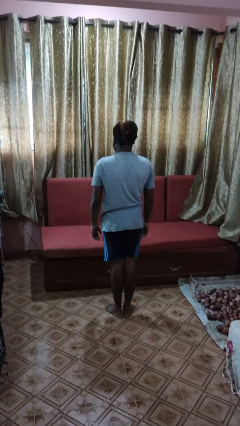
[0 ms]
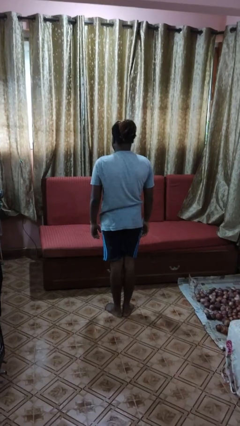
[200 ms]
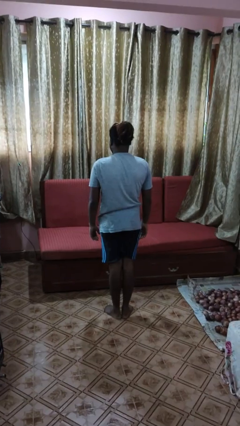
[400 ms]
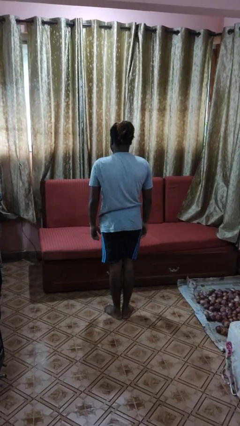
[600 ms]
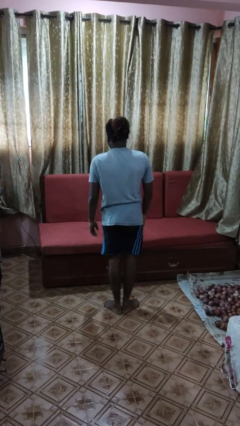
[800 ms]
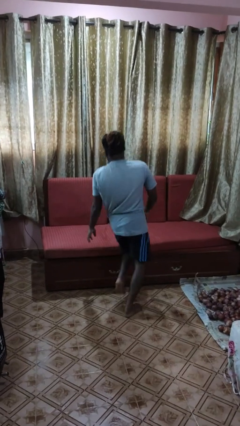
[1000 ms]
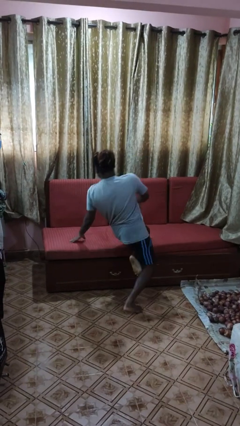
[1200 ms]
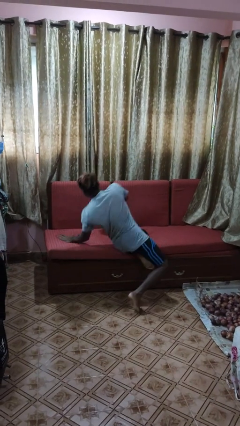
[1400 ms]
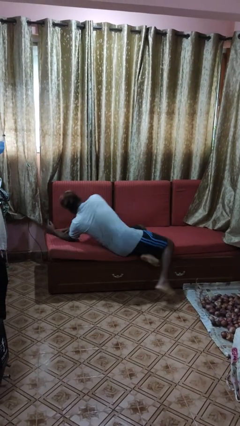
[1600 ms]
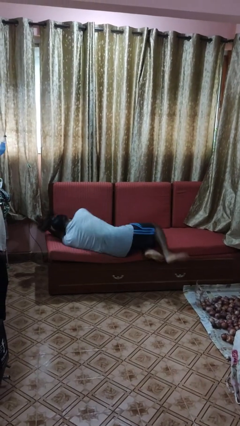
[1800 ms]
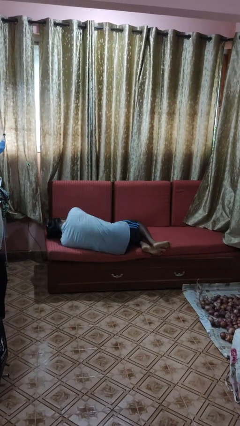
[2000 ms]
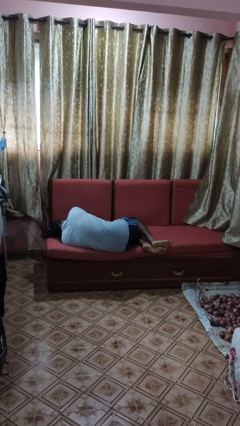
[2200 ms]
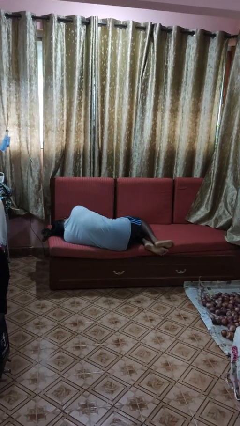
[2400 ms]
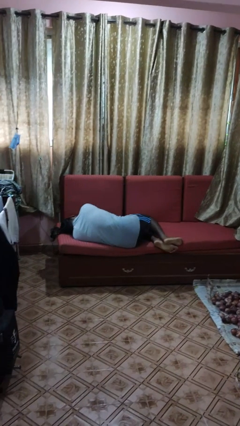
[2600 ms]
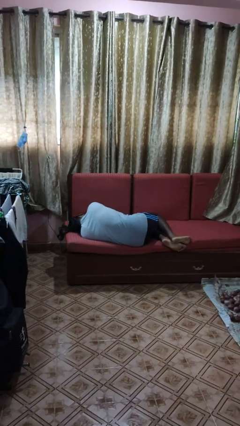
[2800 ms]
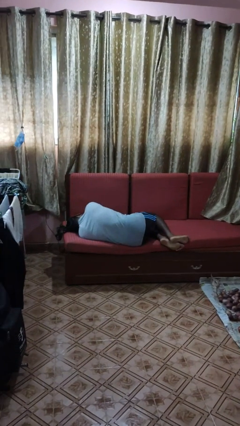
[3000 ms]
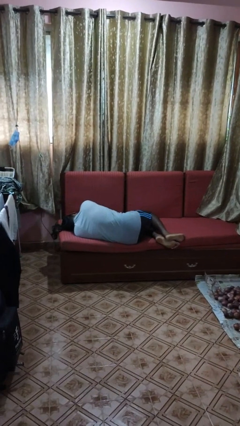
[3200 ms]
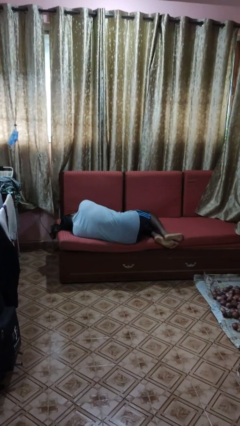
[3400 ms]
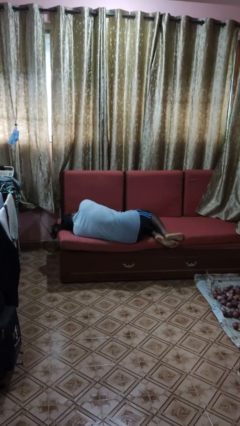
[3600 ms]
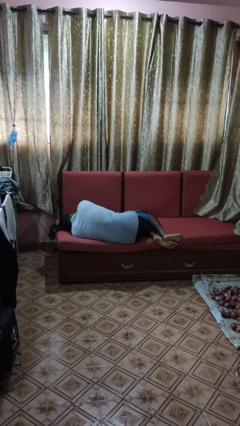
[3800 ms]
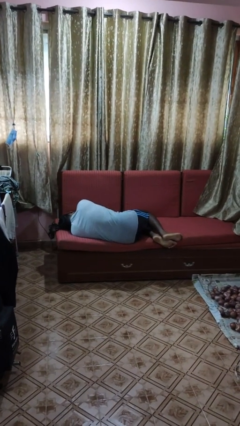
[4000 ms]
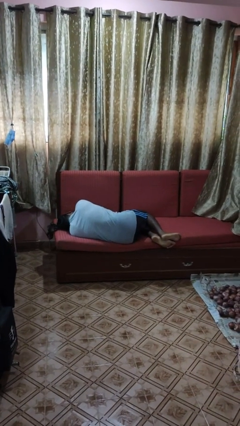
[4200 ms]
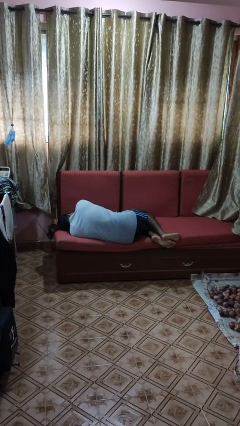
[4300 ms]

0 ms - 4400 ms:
person lies down on couch

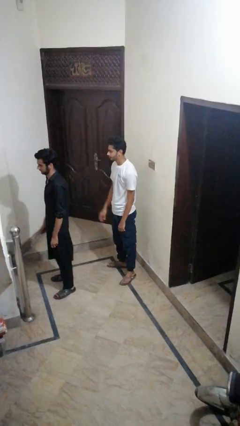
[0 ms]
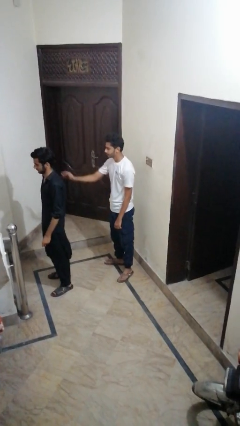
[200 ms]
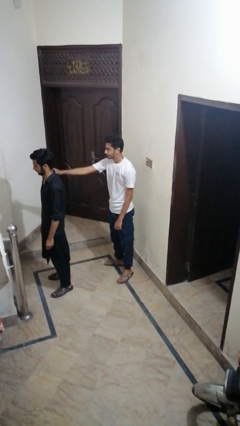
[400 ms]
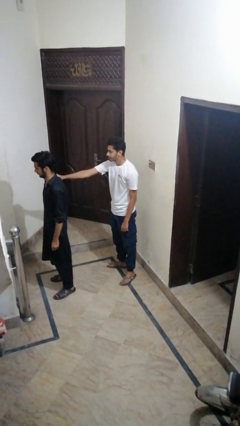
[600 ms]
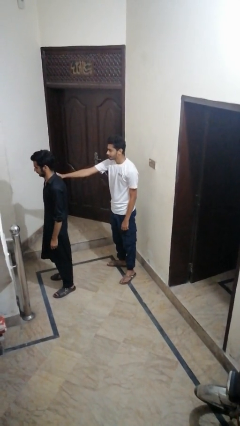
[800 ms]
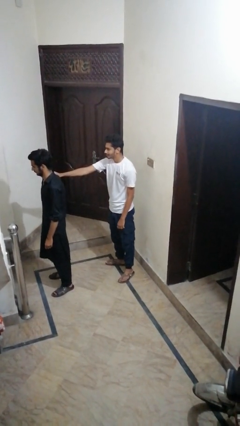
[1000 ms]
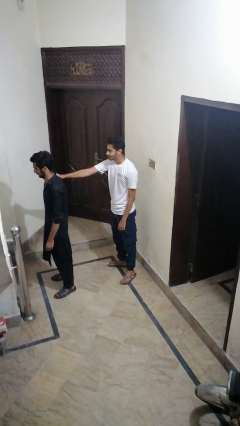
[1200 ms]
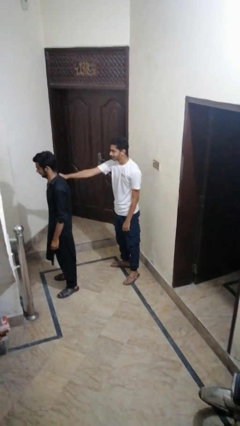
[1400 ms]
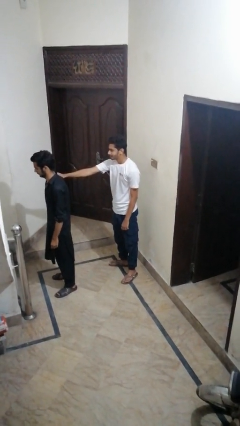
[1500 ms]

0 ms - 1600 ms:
person grabs person by shoulder

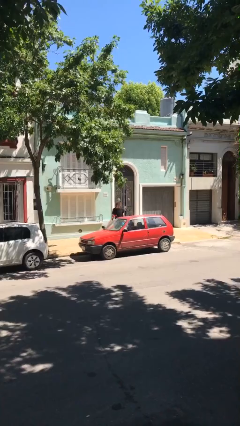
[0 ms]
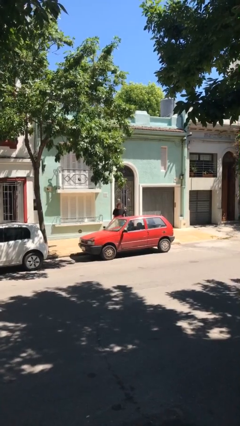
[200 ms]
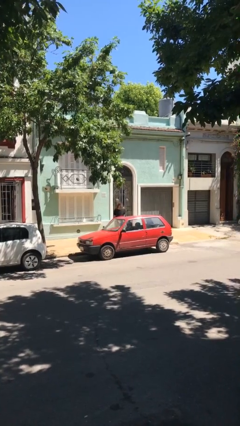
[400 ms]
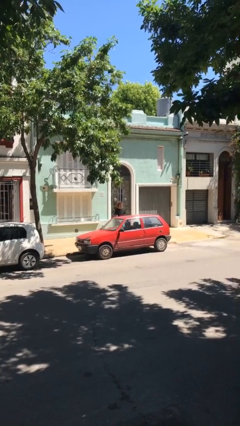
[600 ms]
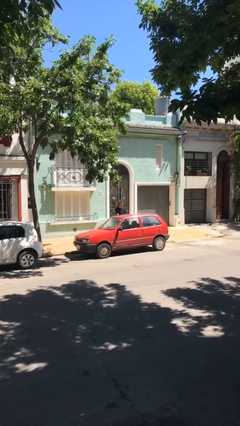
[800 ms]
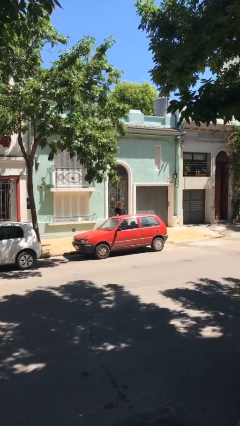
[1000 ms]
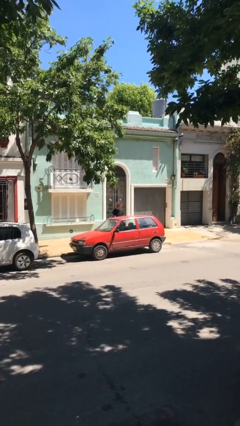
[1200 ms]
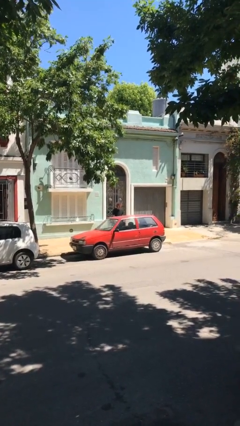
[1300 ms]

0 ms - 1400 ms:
person closes car door

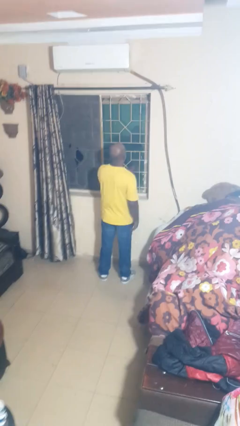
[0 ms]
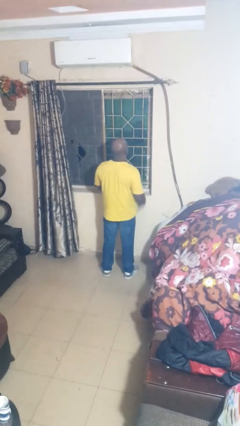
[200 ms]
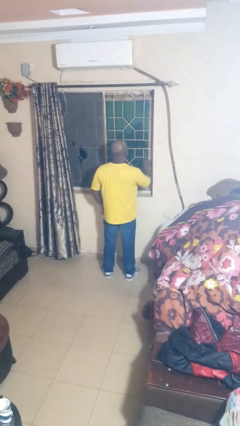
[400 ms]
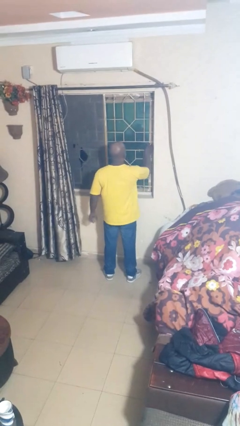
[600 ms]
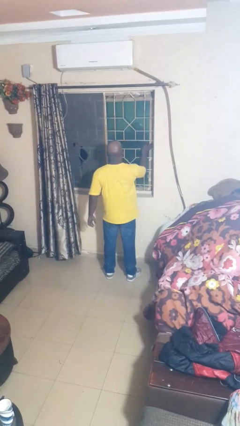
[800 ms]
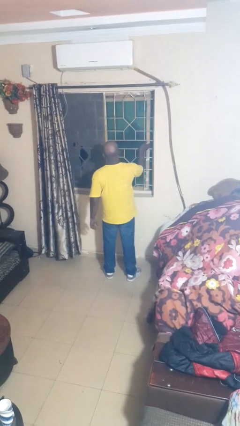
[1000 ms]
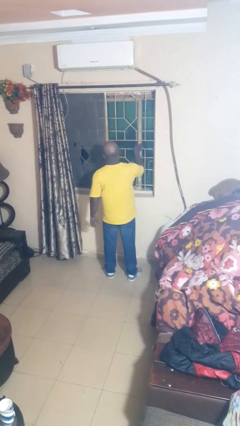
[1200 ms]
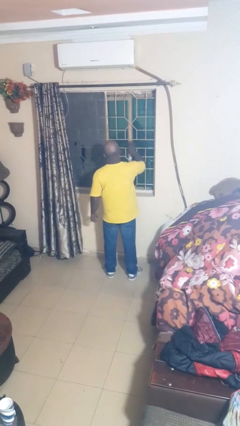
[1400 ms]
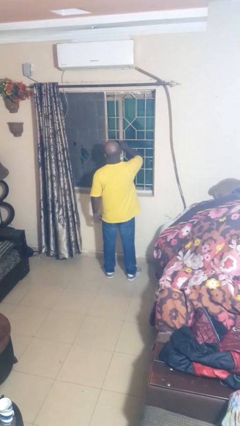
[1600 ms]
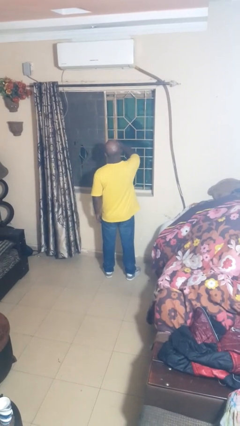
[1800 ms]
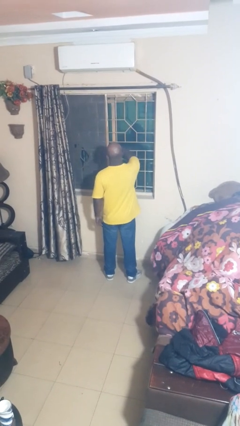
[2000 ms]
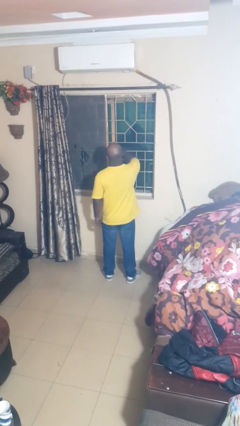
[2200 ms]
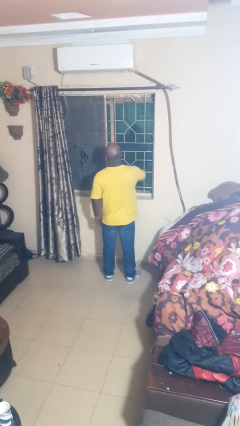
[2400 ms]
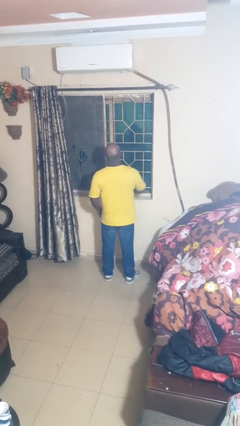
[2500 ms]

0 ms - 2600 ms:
person opens home window

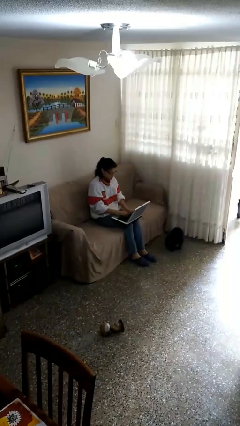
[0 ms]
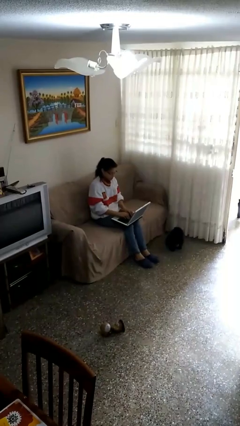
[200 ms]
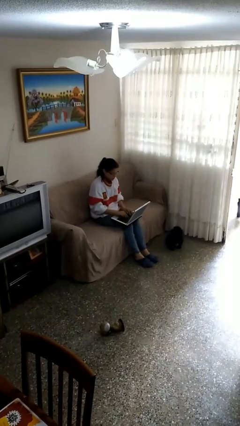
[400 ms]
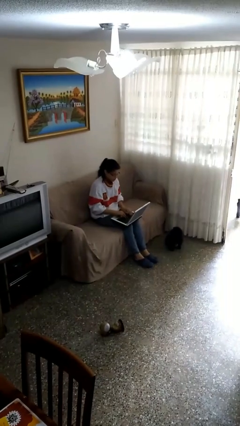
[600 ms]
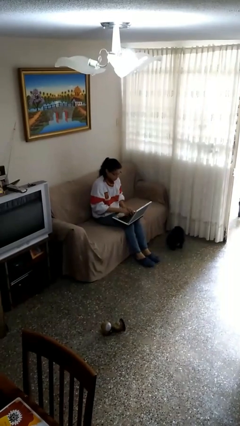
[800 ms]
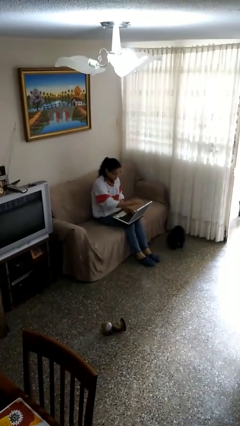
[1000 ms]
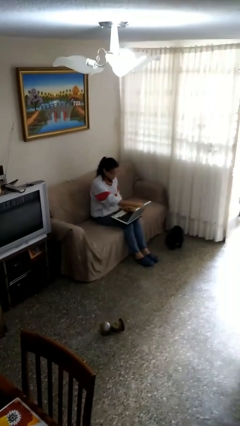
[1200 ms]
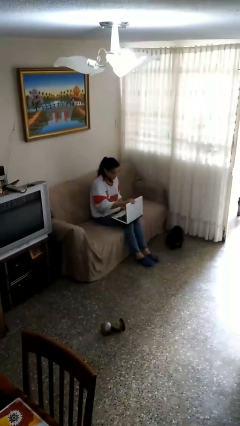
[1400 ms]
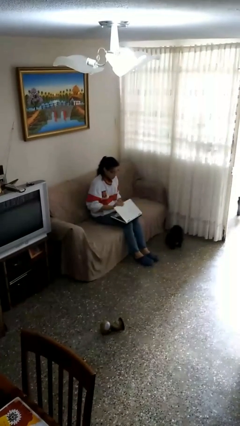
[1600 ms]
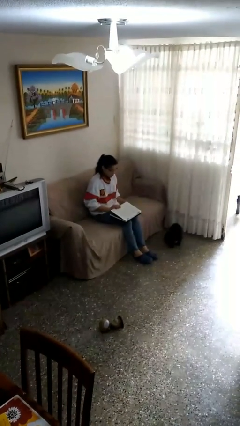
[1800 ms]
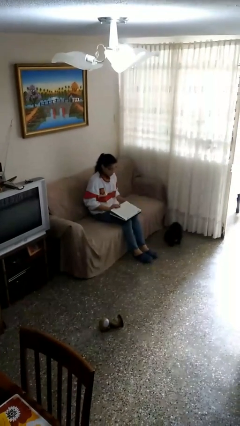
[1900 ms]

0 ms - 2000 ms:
person interacts with laptop

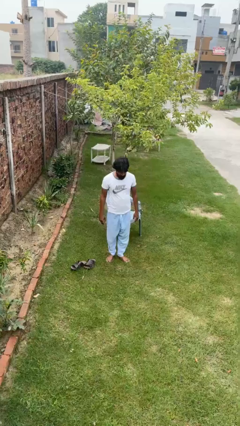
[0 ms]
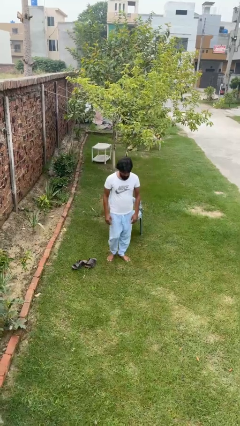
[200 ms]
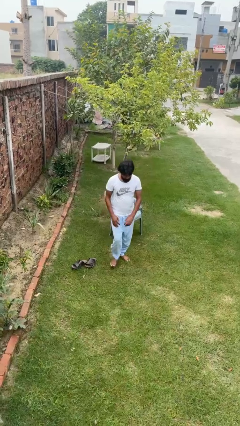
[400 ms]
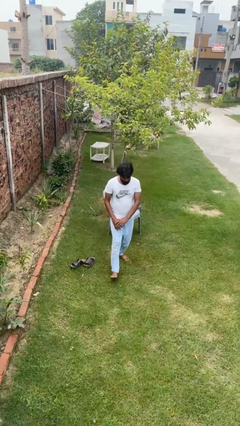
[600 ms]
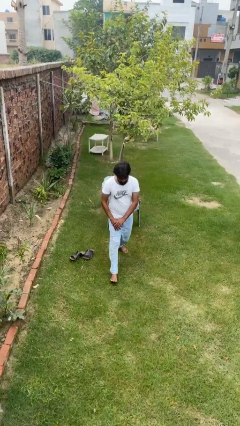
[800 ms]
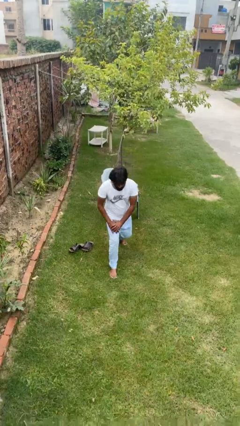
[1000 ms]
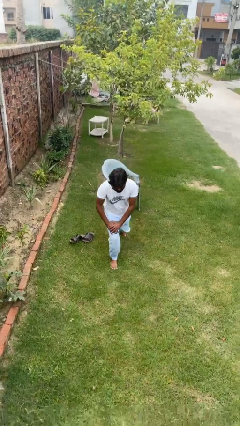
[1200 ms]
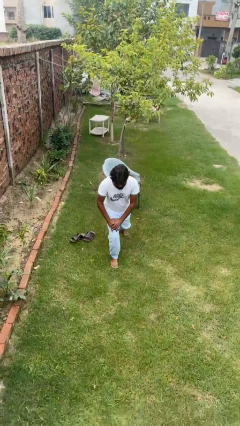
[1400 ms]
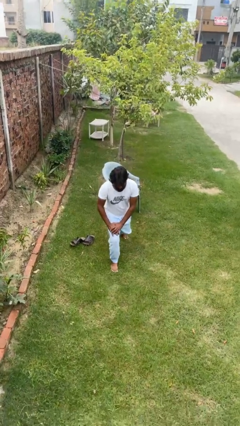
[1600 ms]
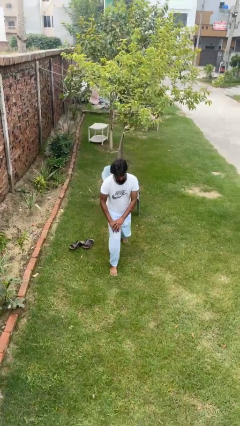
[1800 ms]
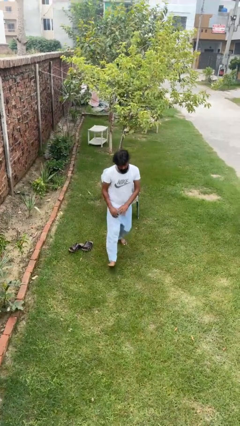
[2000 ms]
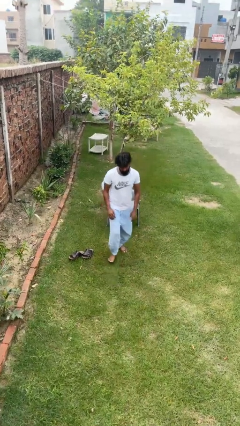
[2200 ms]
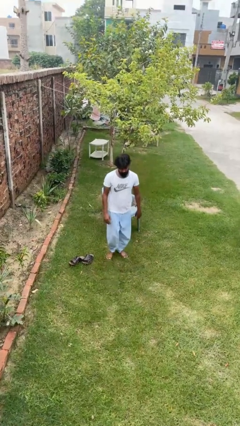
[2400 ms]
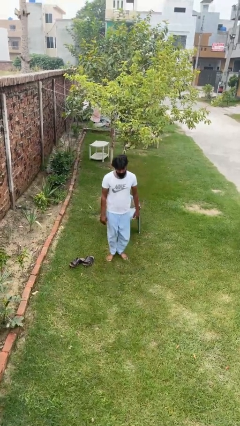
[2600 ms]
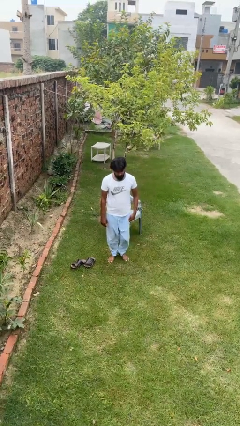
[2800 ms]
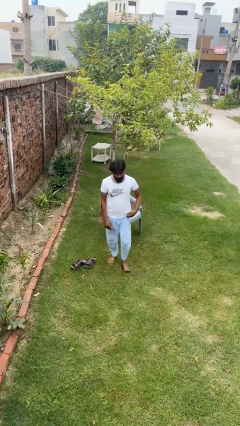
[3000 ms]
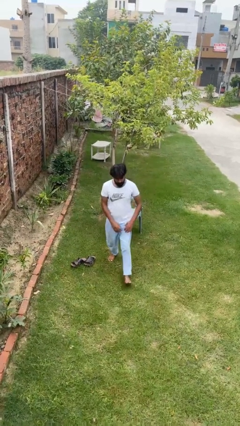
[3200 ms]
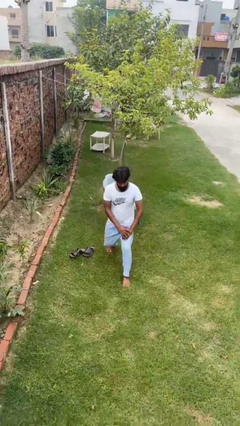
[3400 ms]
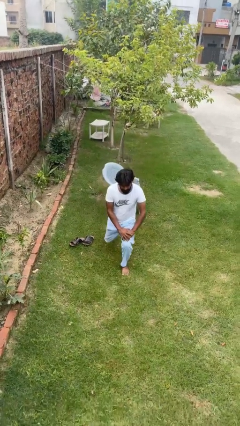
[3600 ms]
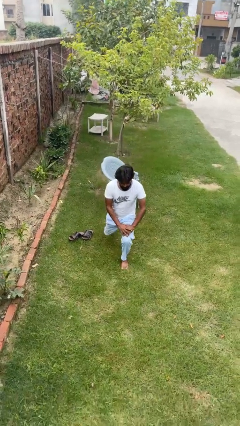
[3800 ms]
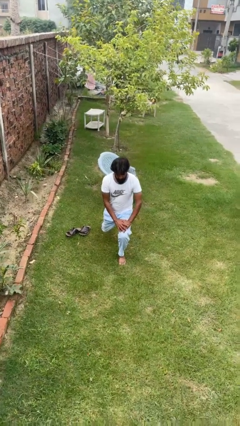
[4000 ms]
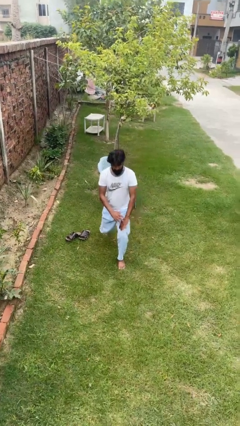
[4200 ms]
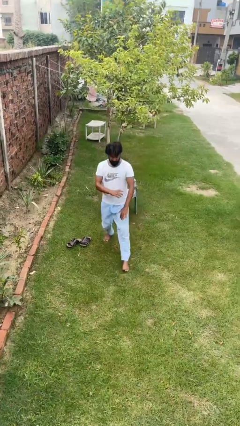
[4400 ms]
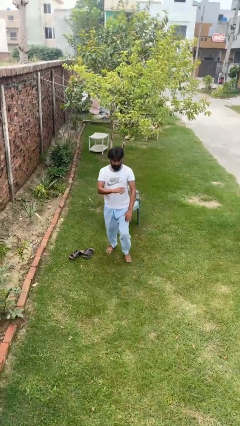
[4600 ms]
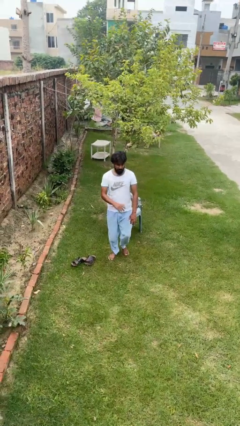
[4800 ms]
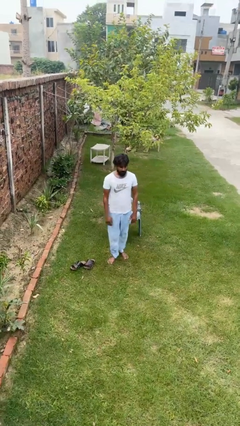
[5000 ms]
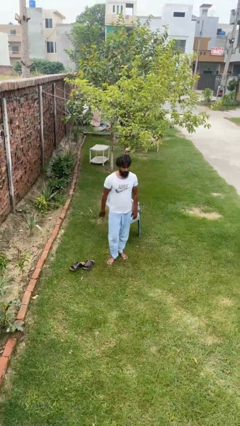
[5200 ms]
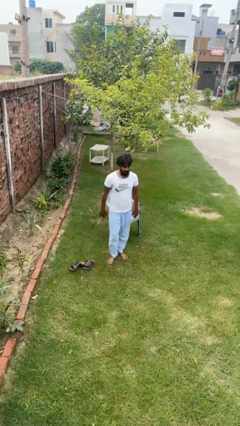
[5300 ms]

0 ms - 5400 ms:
person exercises with lunges

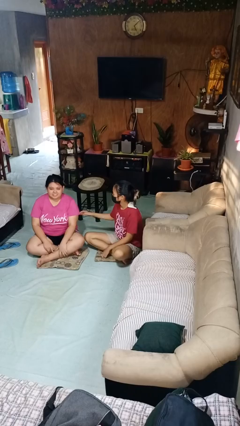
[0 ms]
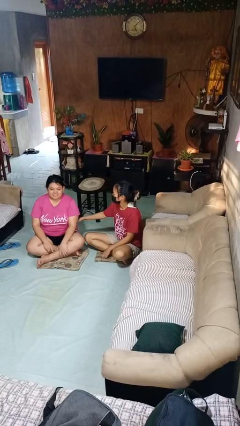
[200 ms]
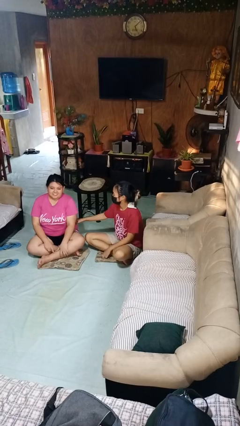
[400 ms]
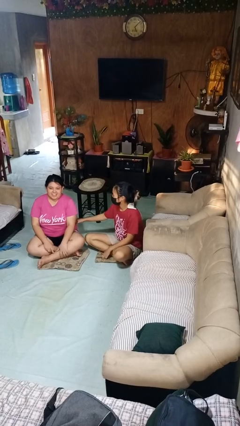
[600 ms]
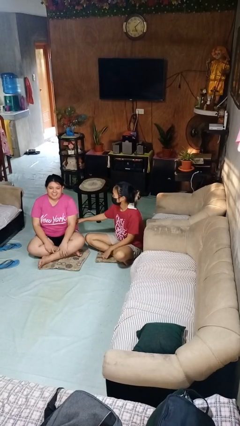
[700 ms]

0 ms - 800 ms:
person tickles person
